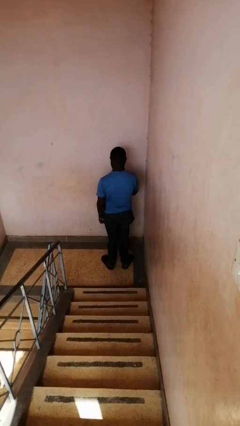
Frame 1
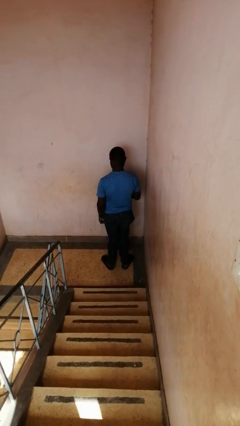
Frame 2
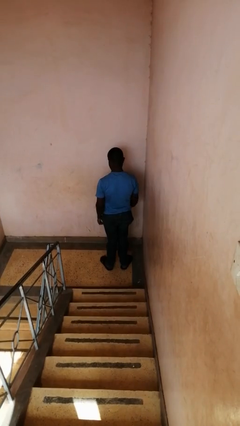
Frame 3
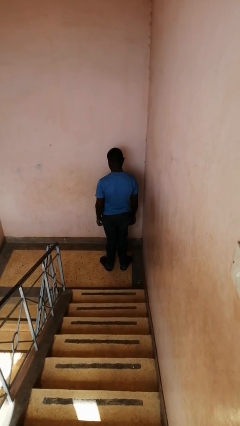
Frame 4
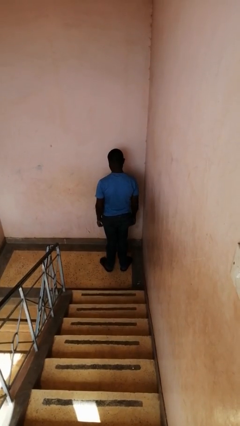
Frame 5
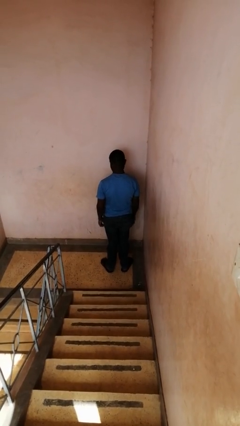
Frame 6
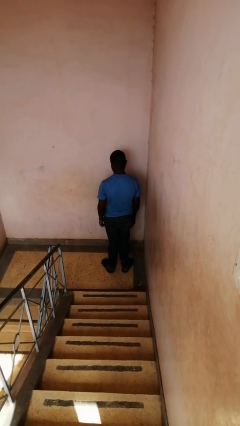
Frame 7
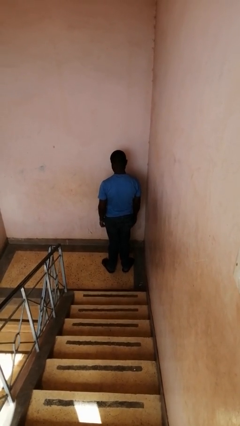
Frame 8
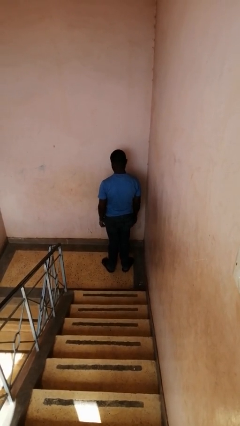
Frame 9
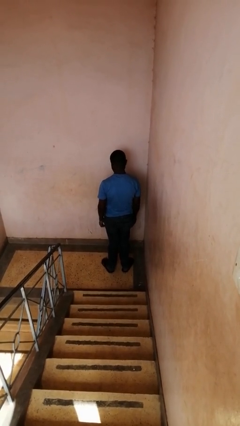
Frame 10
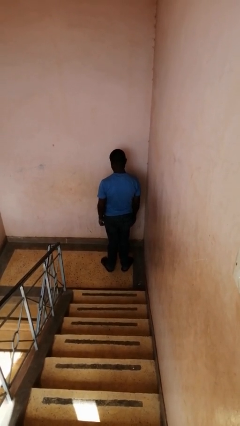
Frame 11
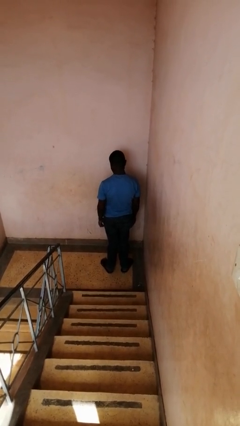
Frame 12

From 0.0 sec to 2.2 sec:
person gestures number one

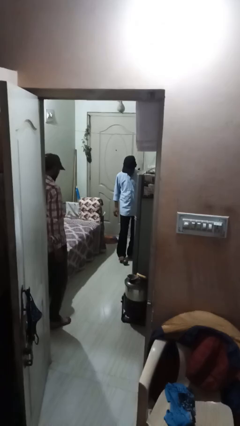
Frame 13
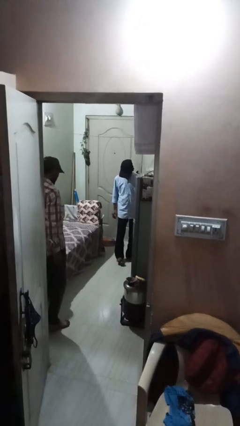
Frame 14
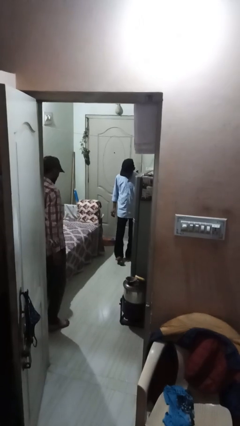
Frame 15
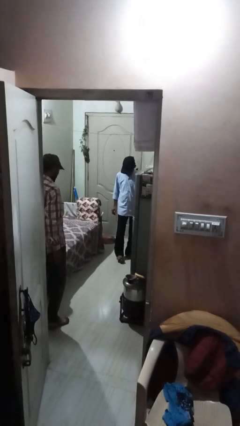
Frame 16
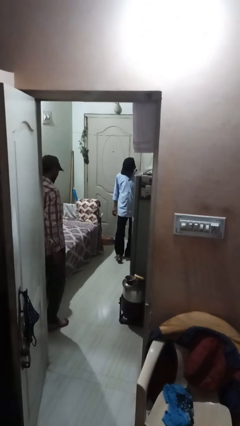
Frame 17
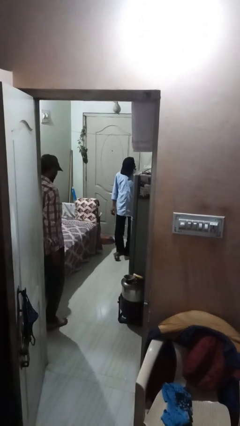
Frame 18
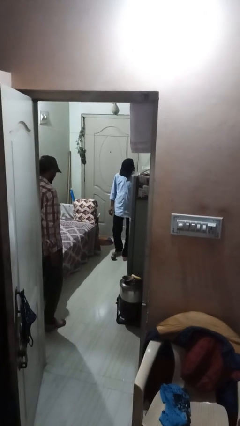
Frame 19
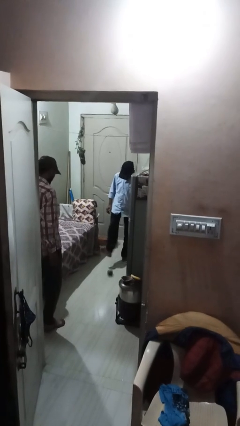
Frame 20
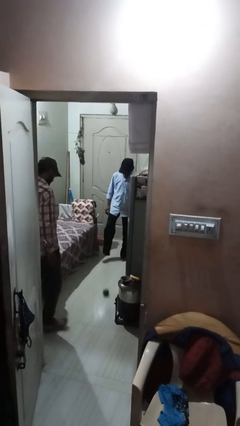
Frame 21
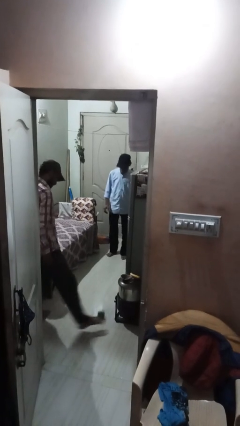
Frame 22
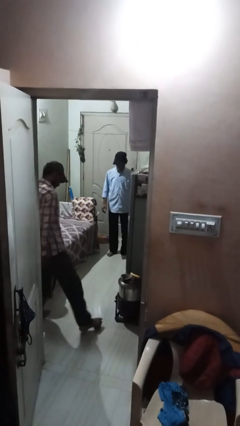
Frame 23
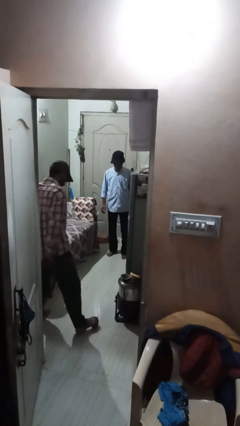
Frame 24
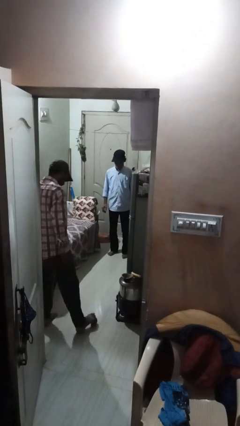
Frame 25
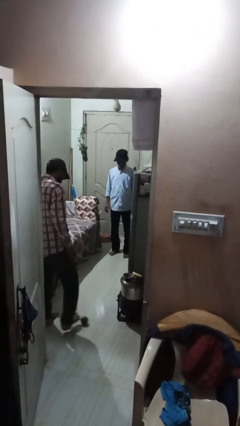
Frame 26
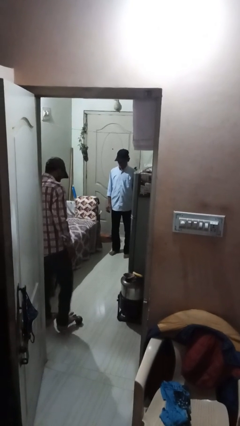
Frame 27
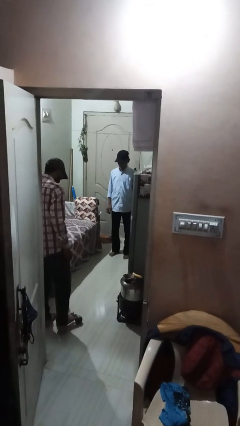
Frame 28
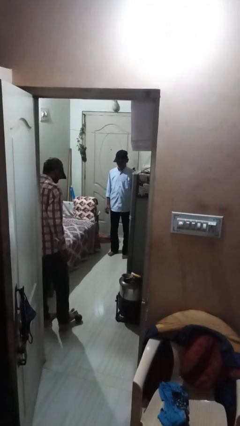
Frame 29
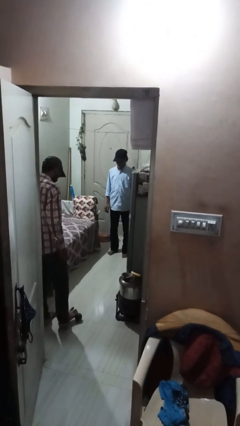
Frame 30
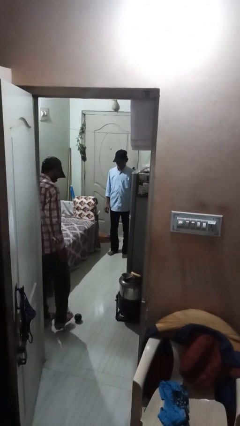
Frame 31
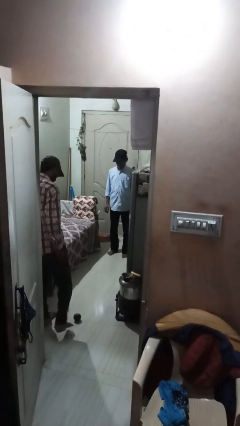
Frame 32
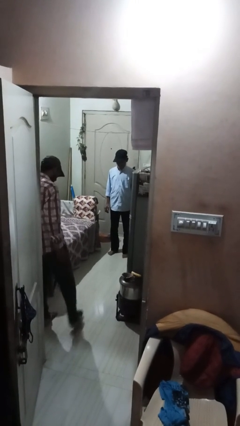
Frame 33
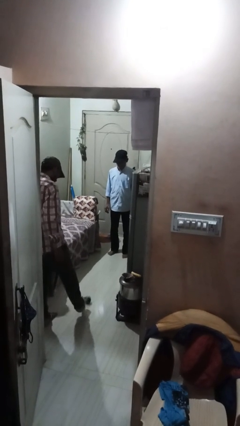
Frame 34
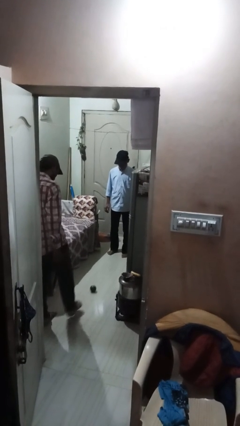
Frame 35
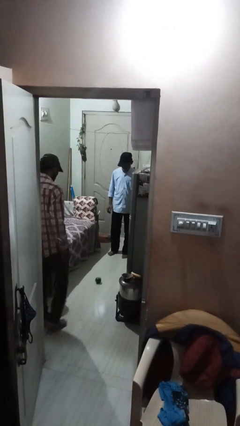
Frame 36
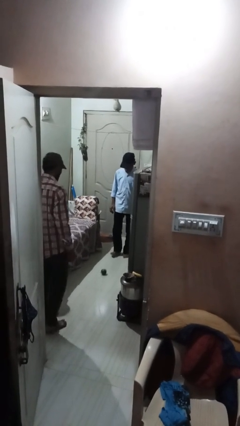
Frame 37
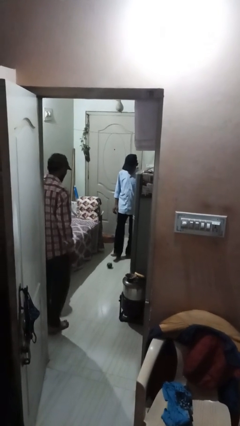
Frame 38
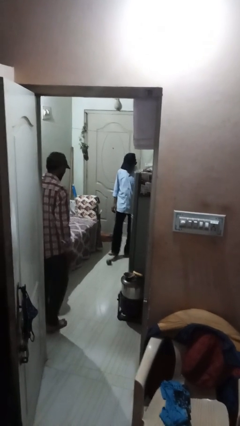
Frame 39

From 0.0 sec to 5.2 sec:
person kicks object to person

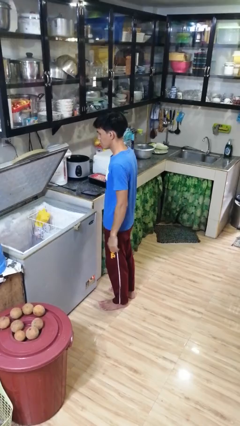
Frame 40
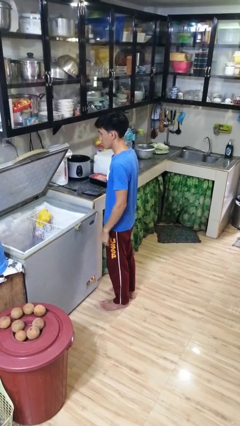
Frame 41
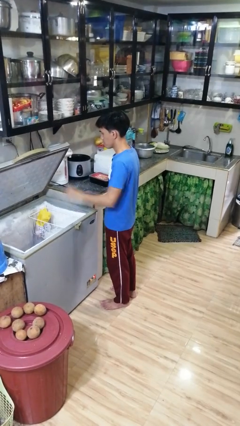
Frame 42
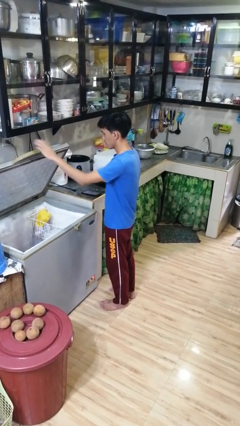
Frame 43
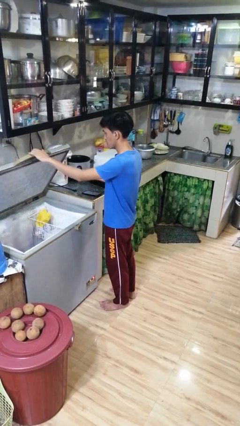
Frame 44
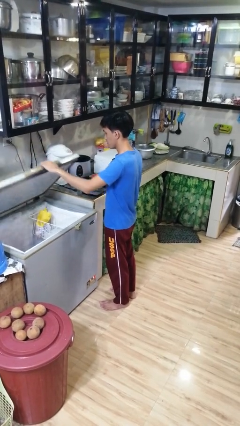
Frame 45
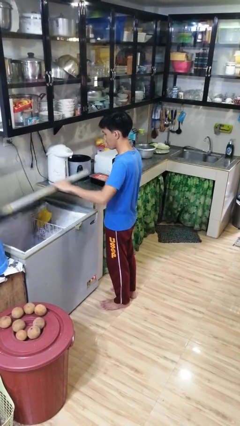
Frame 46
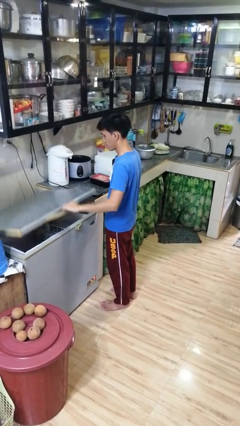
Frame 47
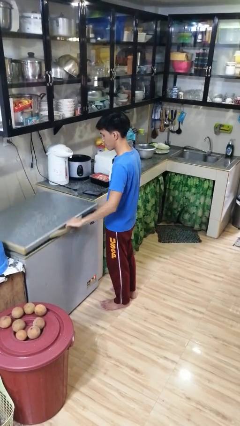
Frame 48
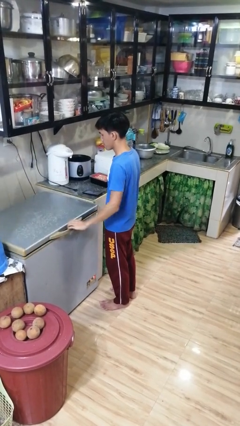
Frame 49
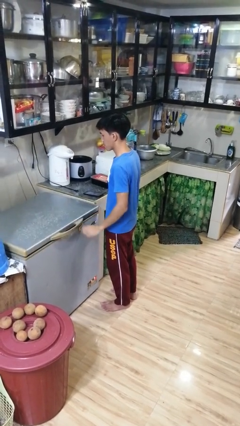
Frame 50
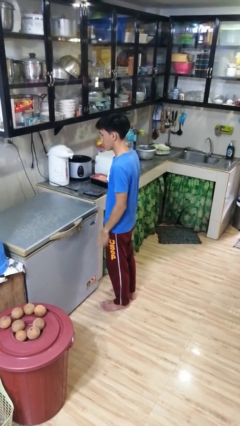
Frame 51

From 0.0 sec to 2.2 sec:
person closes refrigerator

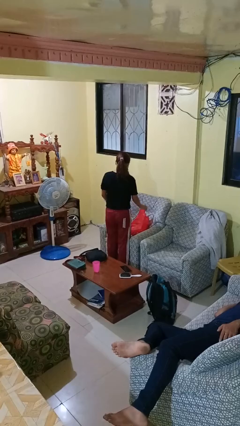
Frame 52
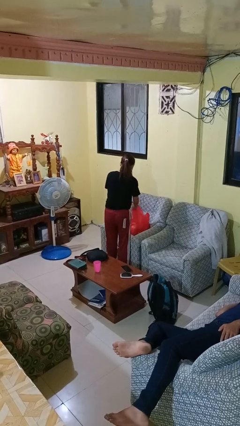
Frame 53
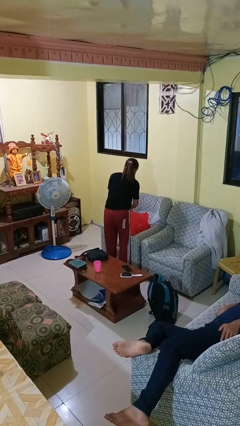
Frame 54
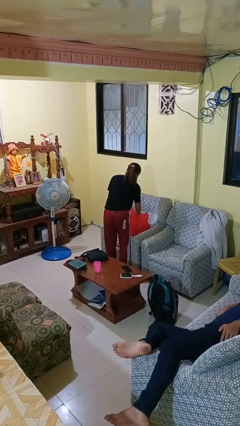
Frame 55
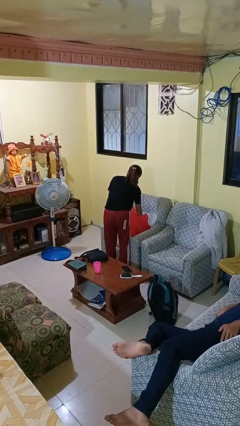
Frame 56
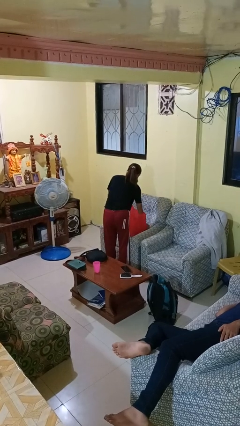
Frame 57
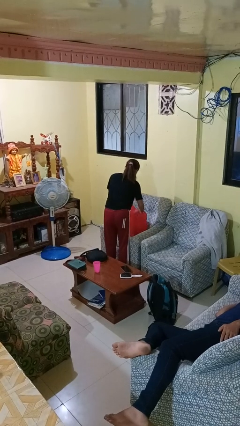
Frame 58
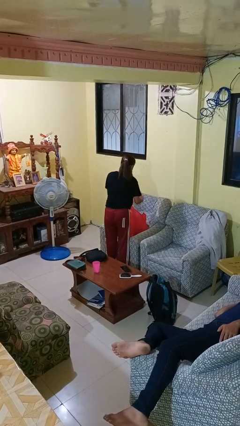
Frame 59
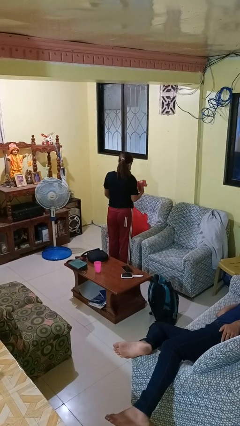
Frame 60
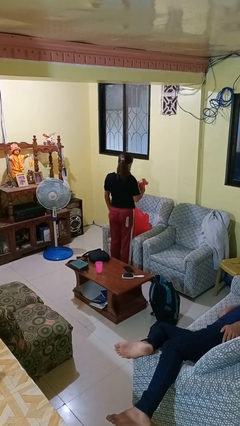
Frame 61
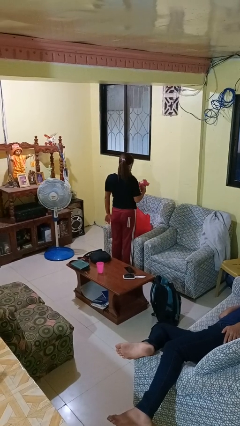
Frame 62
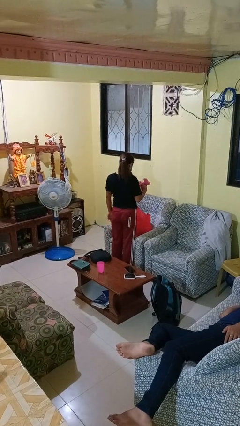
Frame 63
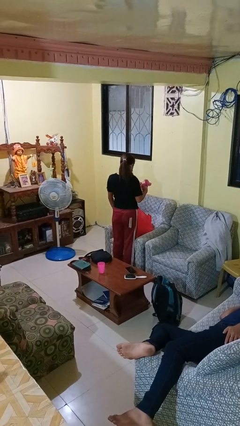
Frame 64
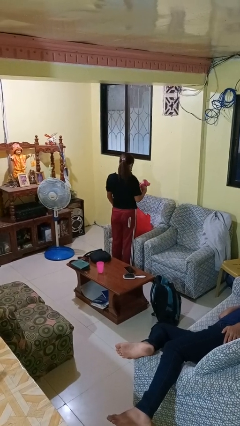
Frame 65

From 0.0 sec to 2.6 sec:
person takes object from bag

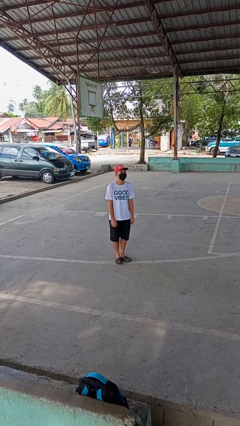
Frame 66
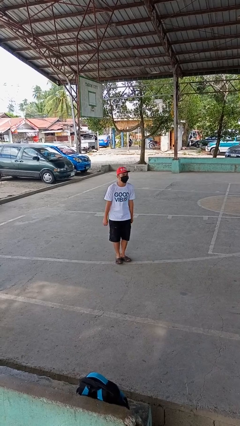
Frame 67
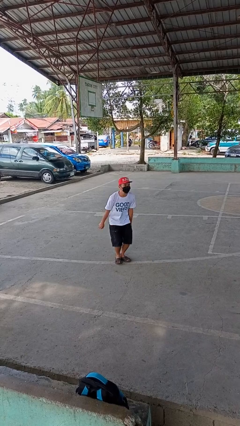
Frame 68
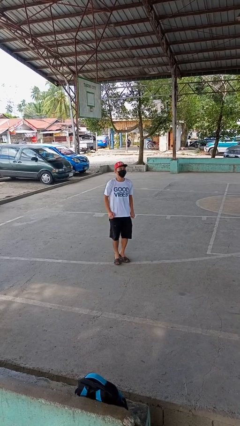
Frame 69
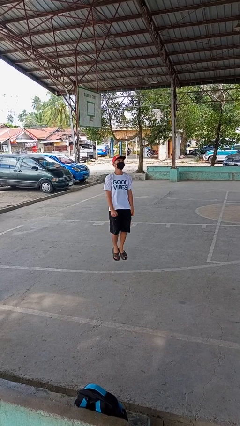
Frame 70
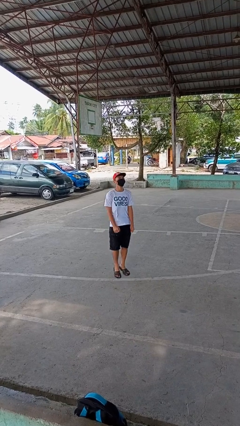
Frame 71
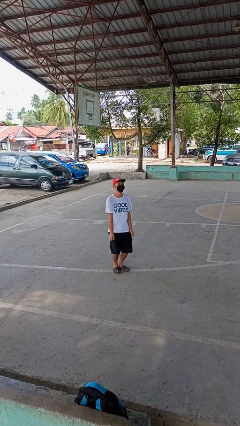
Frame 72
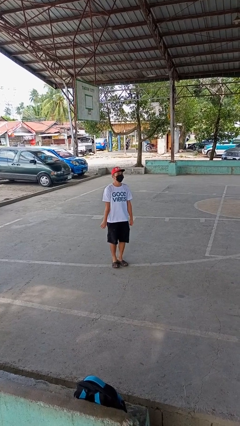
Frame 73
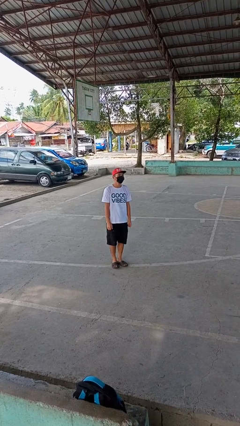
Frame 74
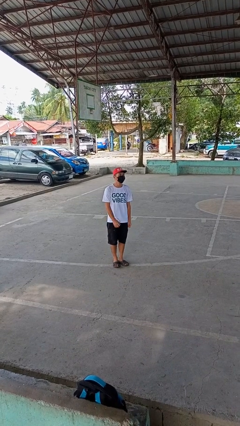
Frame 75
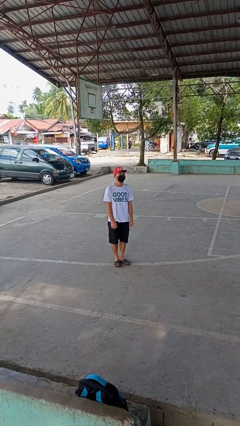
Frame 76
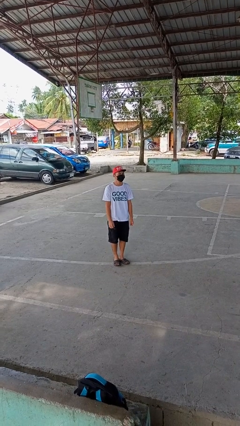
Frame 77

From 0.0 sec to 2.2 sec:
person jumps

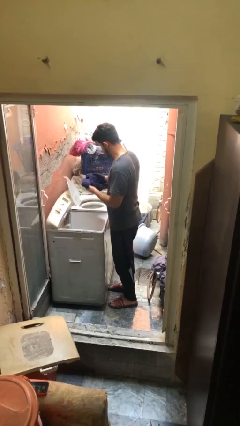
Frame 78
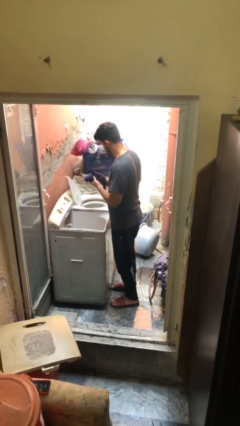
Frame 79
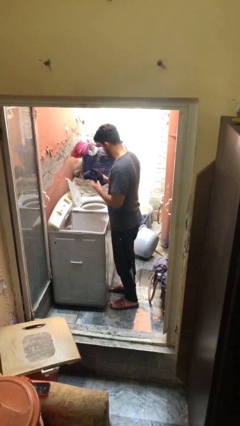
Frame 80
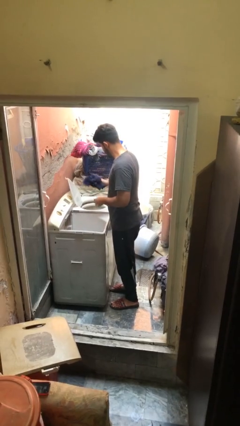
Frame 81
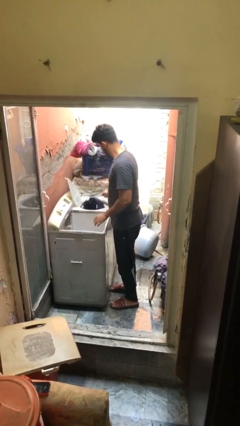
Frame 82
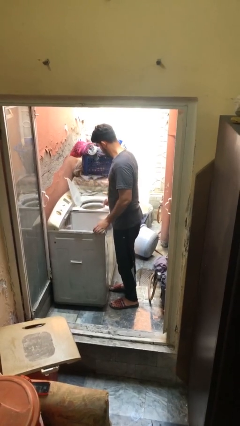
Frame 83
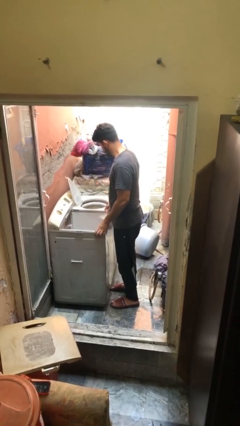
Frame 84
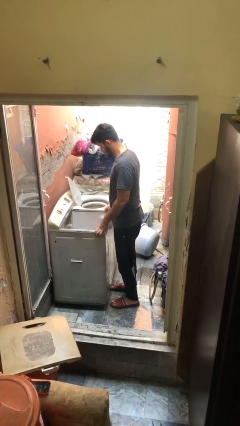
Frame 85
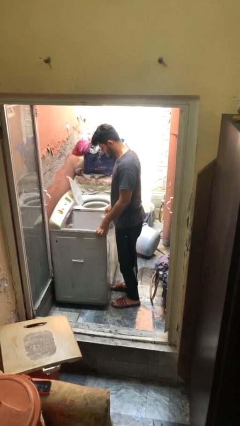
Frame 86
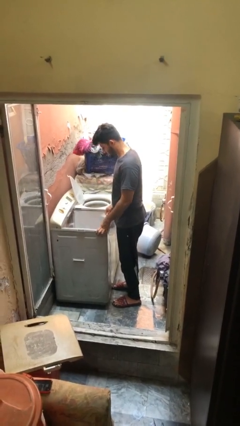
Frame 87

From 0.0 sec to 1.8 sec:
person loads dryer

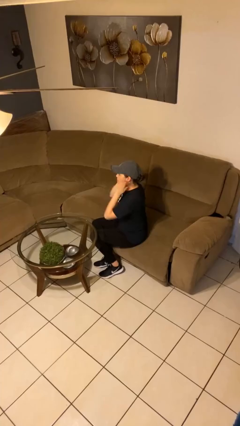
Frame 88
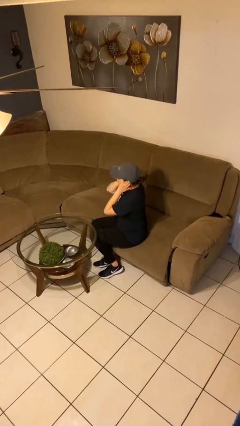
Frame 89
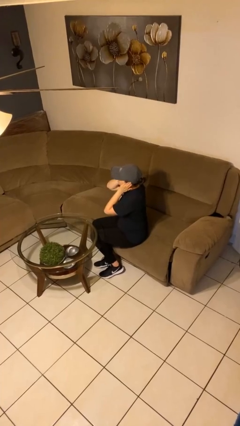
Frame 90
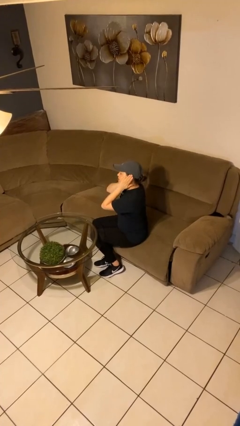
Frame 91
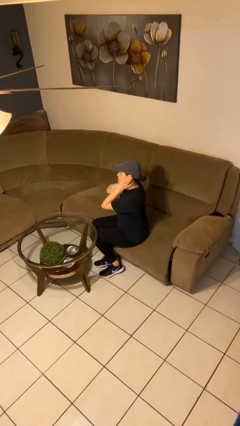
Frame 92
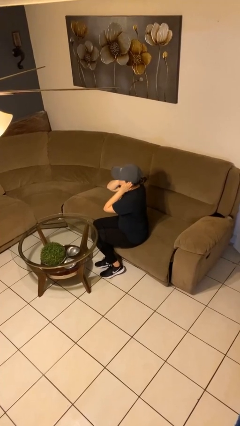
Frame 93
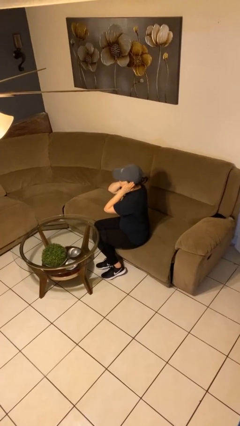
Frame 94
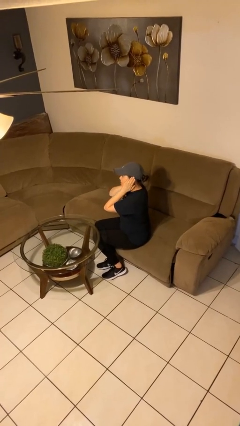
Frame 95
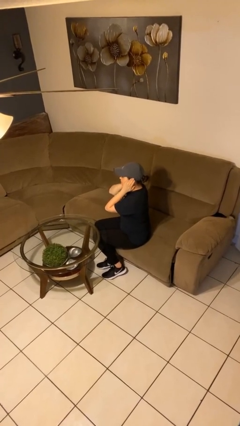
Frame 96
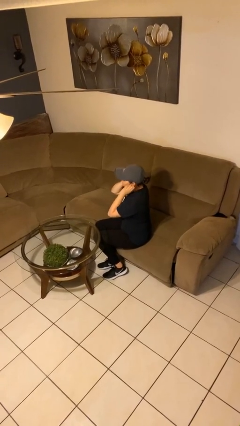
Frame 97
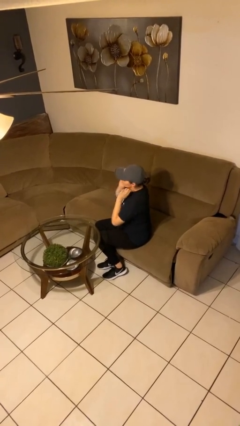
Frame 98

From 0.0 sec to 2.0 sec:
person puts fingers in ear
